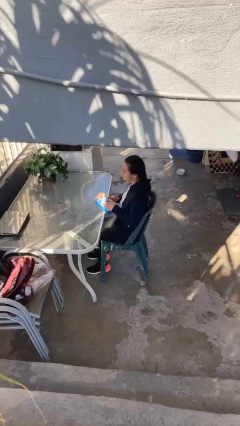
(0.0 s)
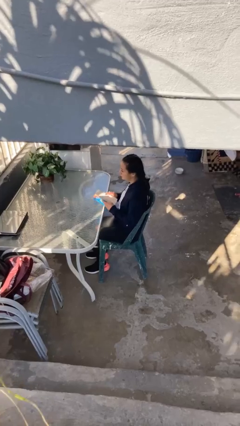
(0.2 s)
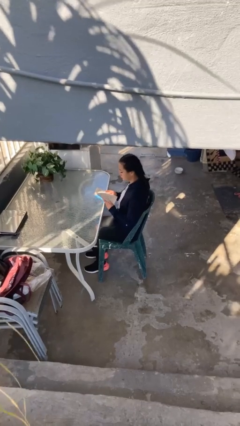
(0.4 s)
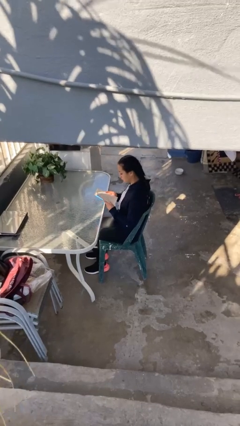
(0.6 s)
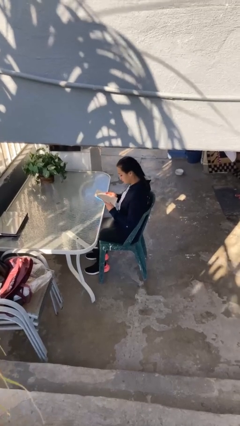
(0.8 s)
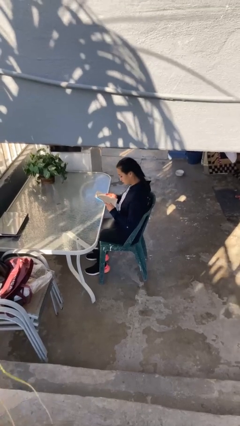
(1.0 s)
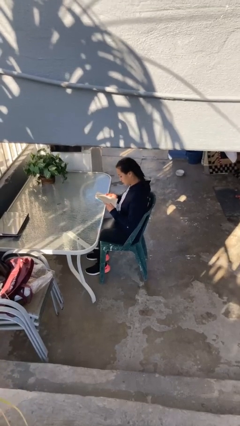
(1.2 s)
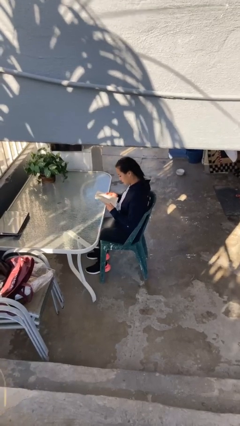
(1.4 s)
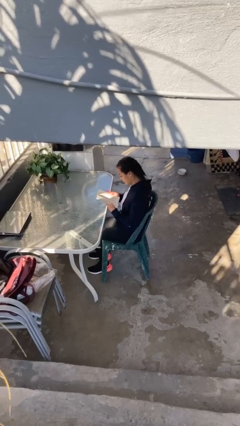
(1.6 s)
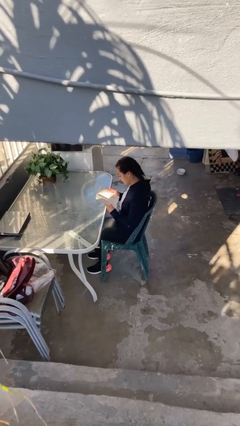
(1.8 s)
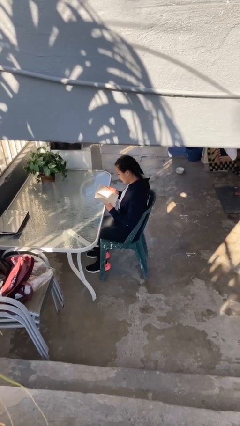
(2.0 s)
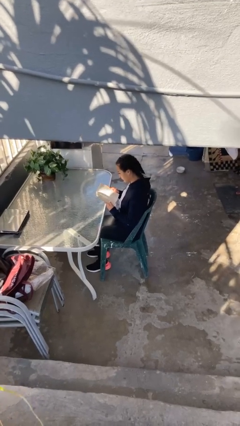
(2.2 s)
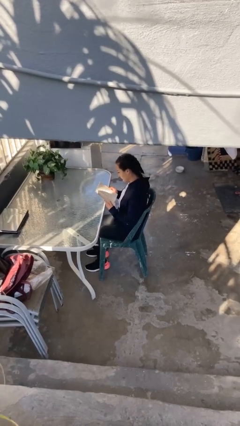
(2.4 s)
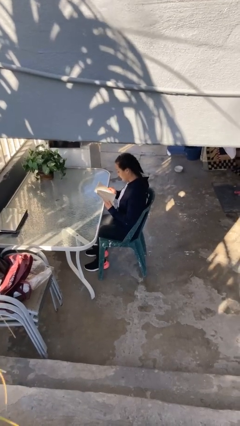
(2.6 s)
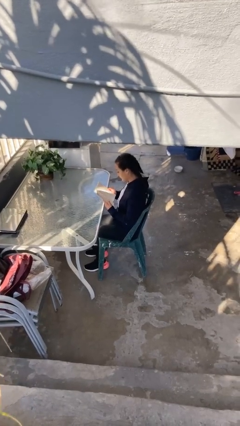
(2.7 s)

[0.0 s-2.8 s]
person reads document

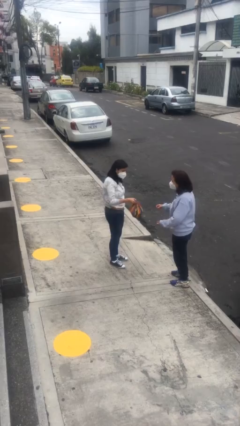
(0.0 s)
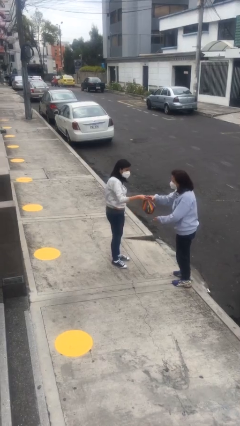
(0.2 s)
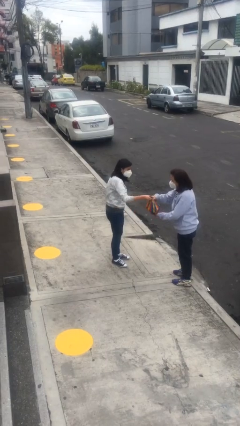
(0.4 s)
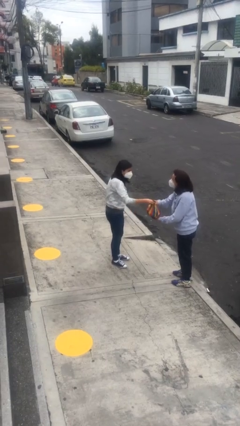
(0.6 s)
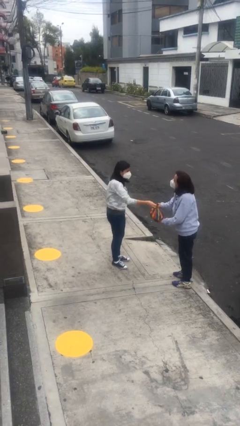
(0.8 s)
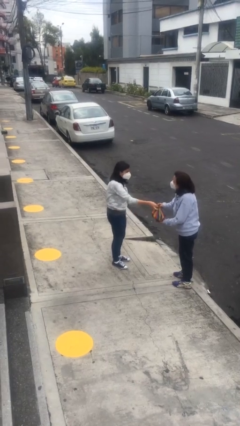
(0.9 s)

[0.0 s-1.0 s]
person transfers object to person

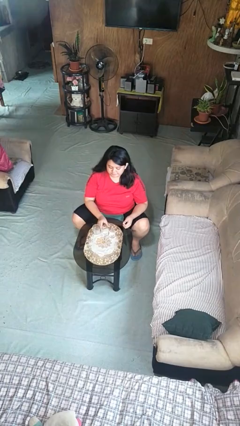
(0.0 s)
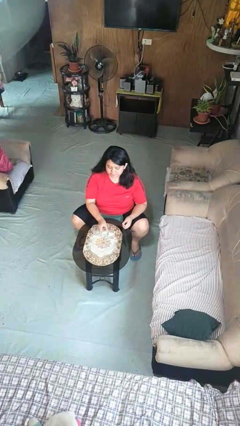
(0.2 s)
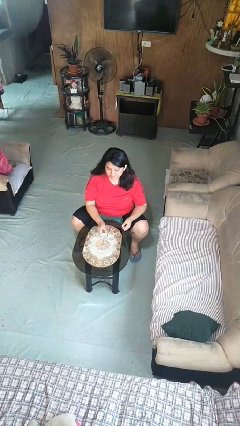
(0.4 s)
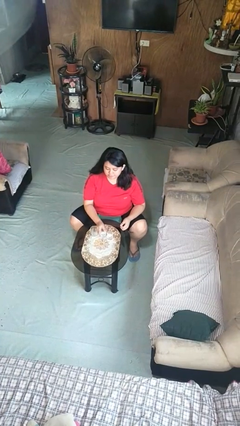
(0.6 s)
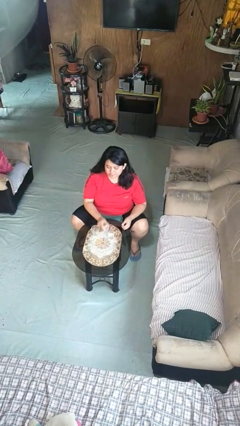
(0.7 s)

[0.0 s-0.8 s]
person picks up object from table

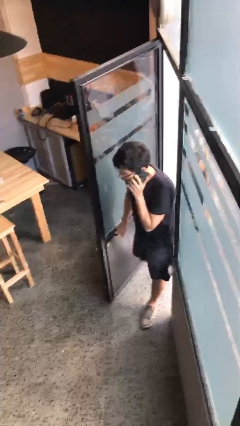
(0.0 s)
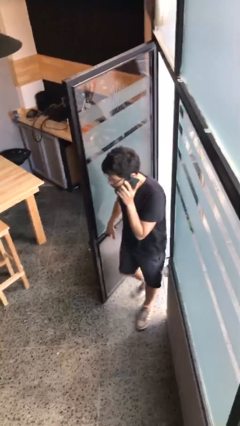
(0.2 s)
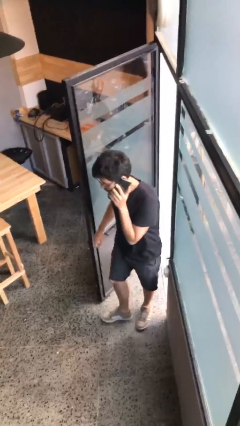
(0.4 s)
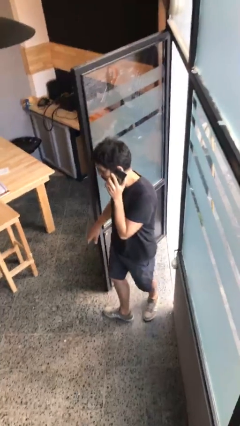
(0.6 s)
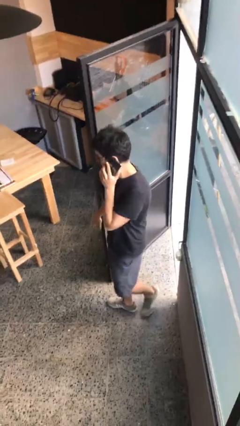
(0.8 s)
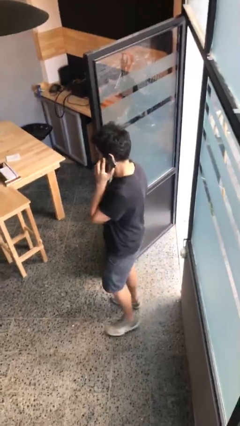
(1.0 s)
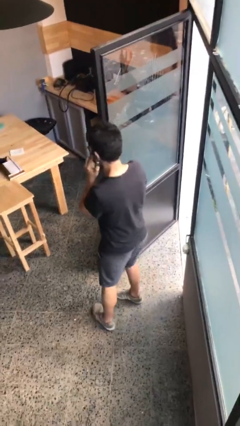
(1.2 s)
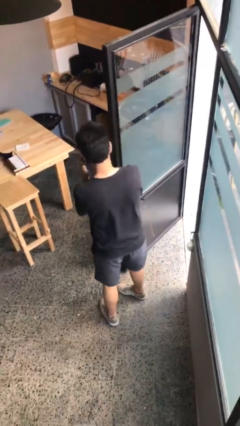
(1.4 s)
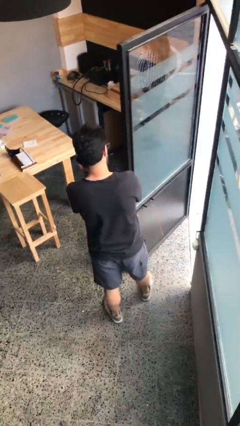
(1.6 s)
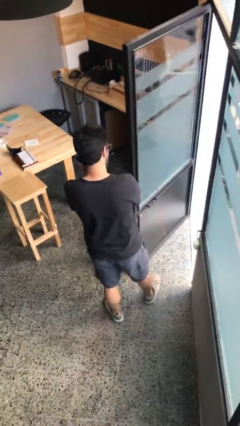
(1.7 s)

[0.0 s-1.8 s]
person enters scene through structure

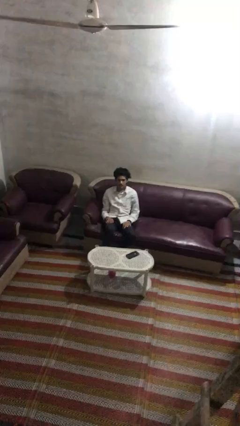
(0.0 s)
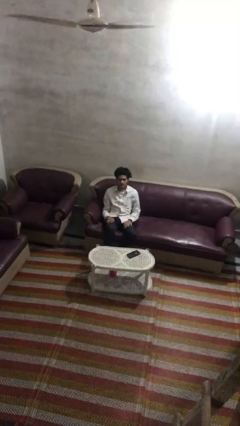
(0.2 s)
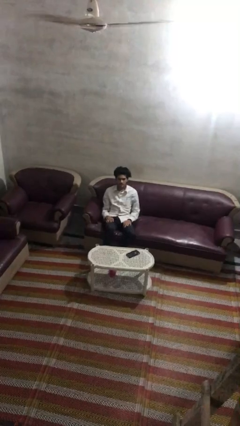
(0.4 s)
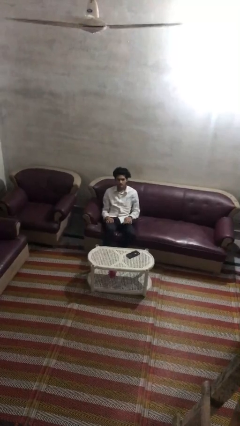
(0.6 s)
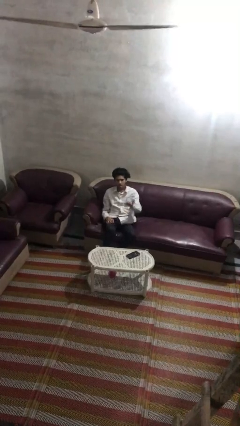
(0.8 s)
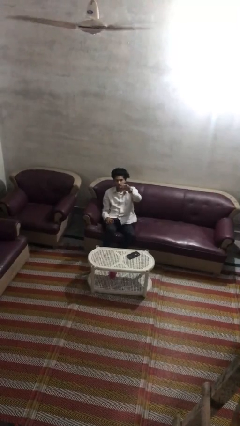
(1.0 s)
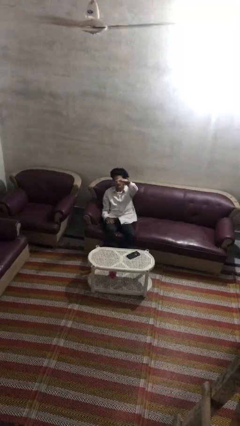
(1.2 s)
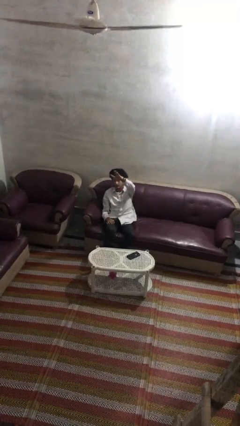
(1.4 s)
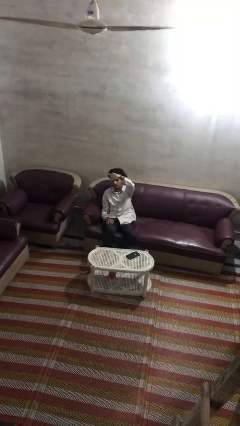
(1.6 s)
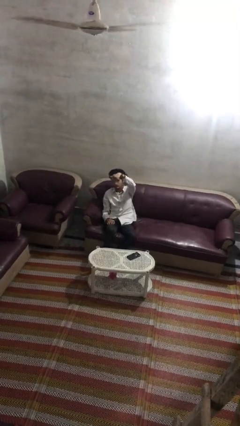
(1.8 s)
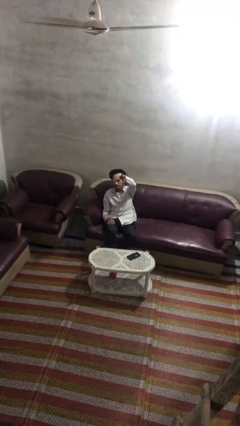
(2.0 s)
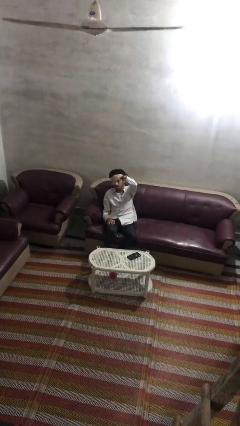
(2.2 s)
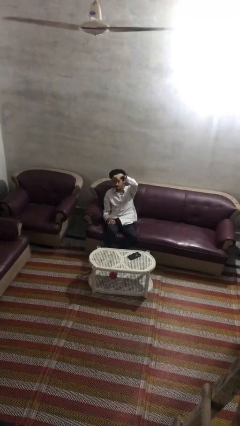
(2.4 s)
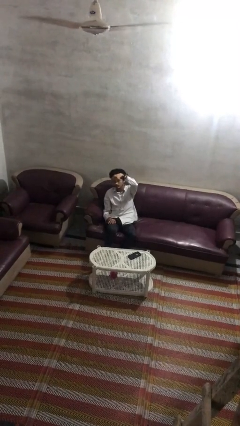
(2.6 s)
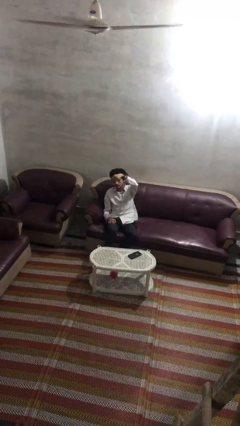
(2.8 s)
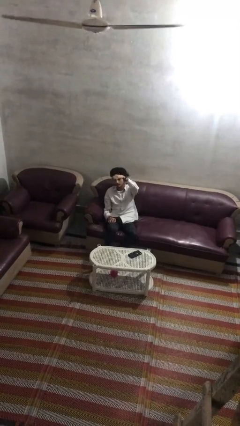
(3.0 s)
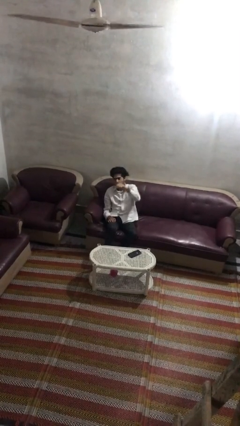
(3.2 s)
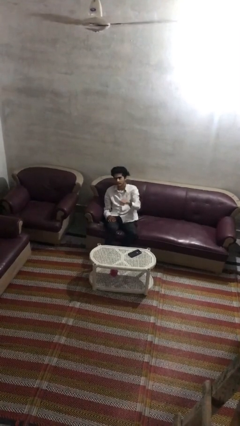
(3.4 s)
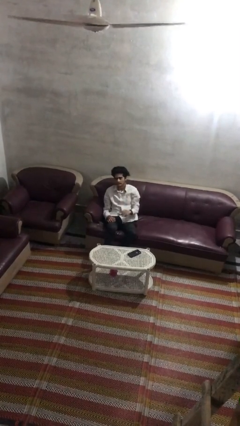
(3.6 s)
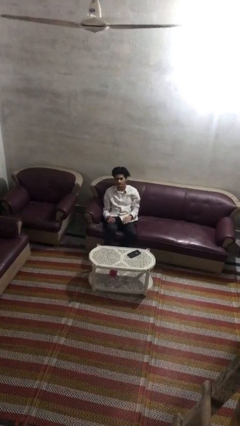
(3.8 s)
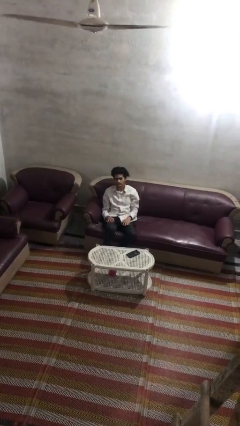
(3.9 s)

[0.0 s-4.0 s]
person gestures come here

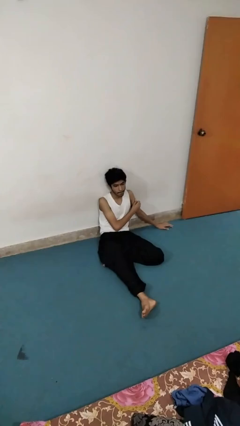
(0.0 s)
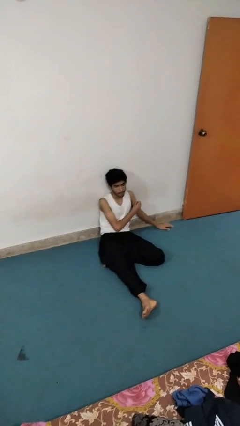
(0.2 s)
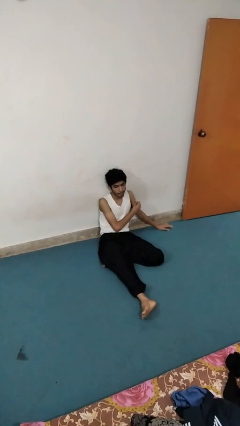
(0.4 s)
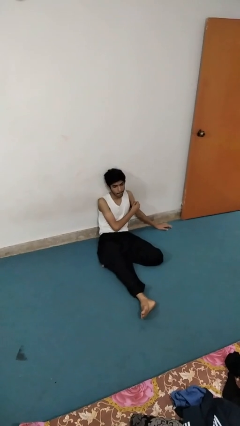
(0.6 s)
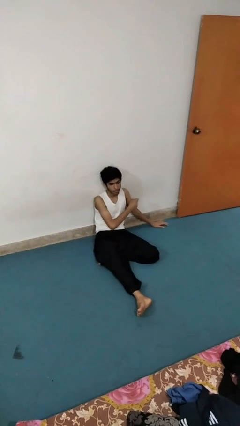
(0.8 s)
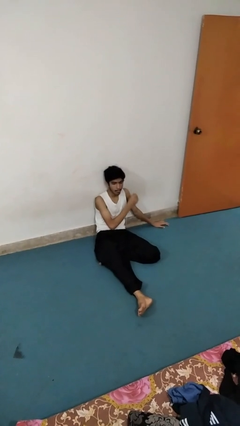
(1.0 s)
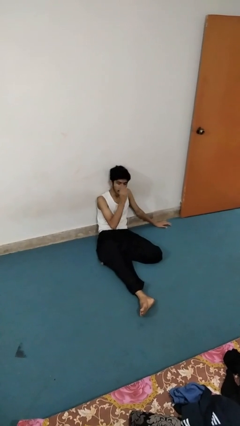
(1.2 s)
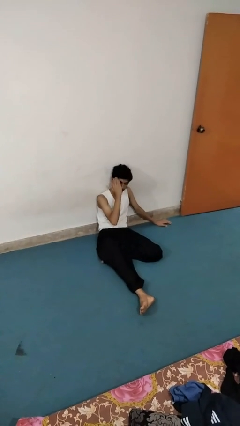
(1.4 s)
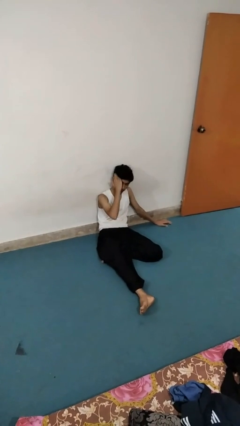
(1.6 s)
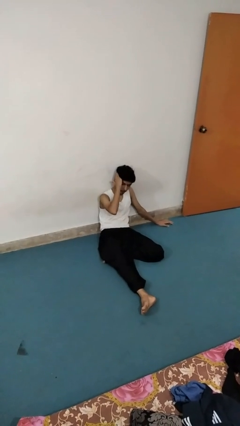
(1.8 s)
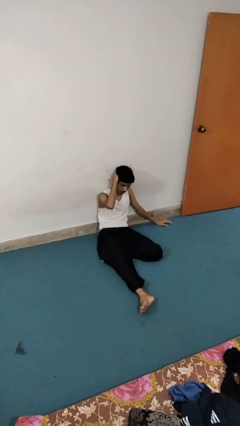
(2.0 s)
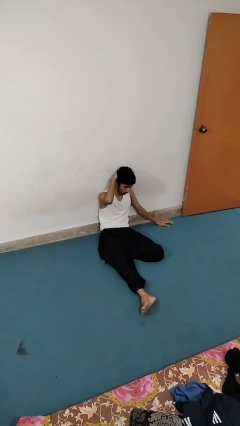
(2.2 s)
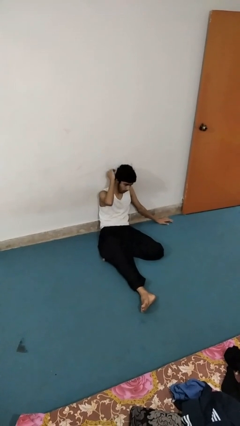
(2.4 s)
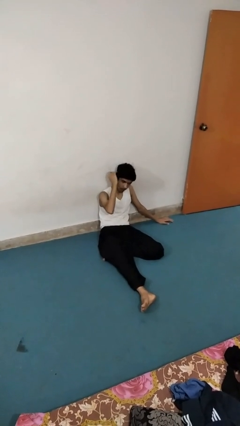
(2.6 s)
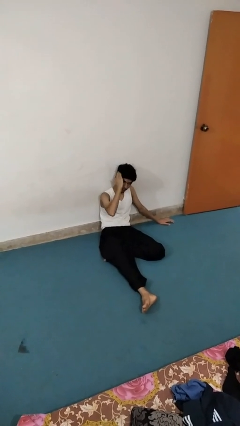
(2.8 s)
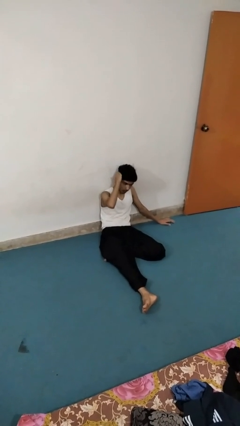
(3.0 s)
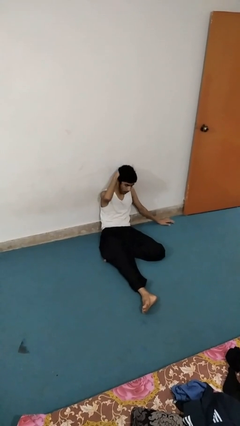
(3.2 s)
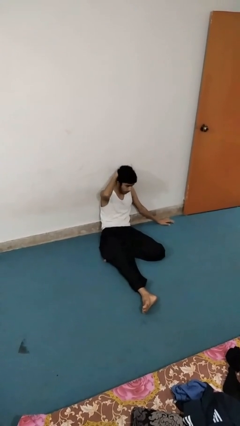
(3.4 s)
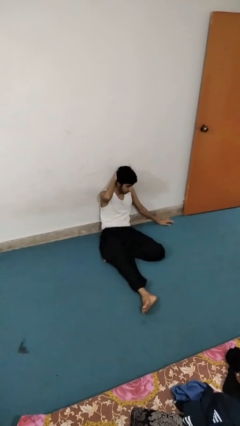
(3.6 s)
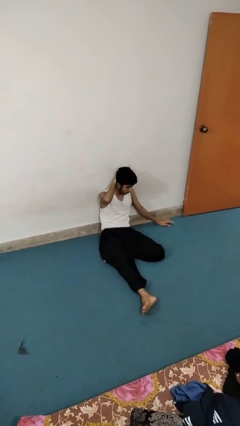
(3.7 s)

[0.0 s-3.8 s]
person strokes hair

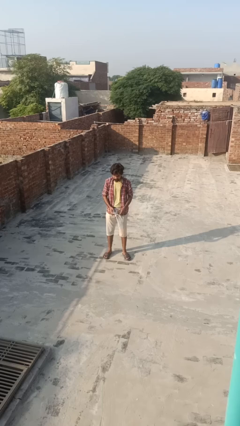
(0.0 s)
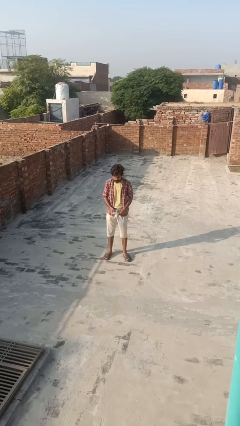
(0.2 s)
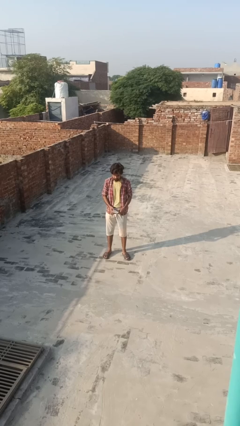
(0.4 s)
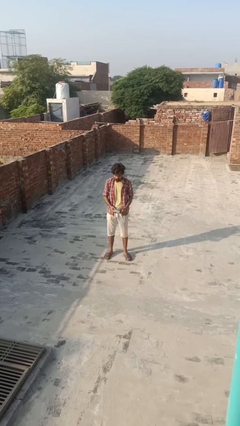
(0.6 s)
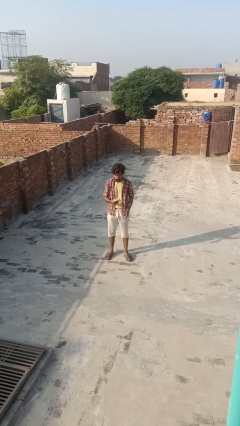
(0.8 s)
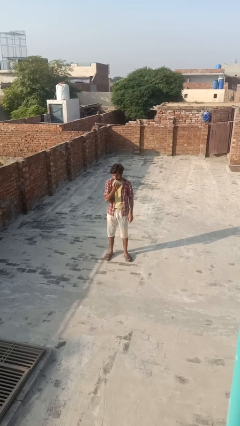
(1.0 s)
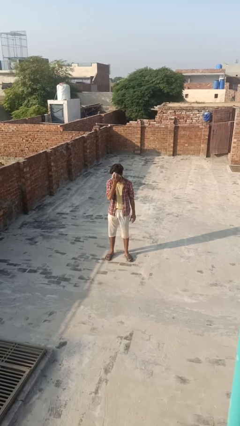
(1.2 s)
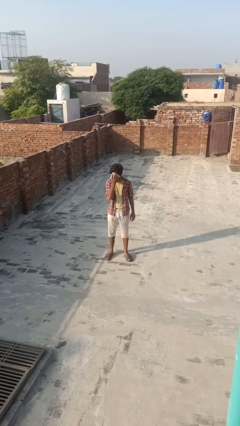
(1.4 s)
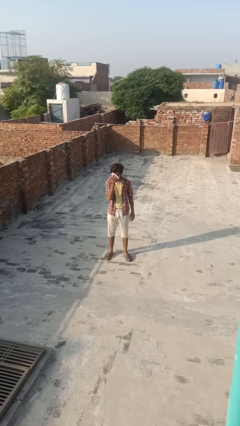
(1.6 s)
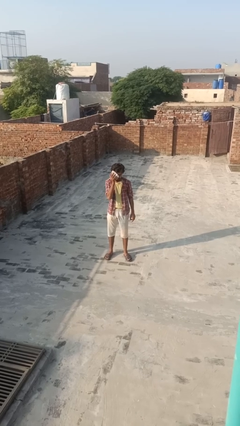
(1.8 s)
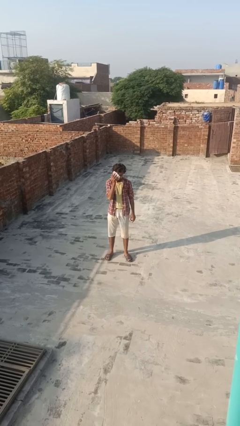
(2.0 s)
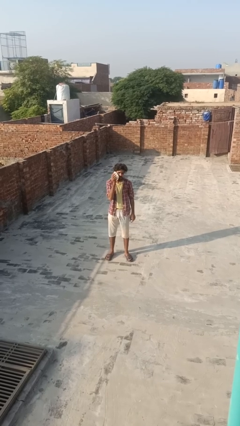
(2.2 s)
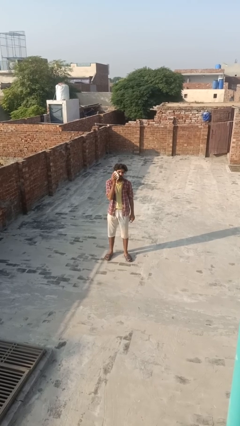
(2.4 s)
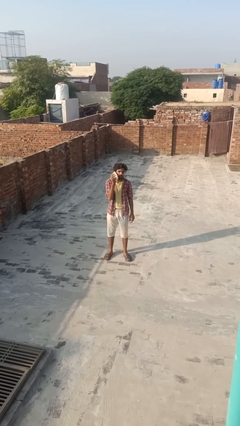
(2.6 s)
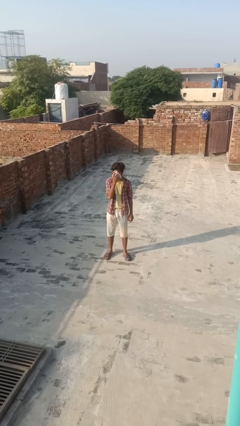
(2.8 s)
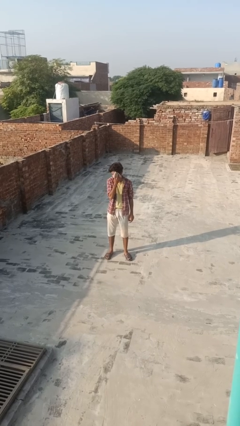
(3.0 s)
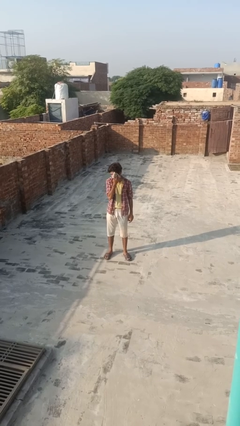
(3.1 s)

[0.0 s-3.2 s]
person wipes mouth with napkin
